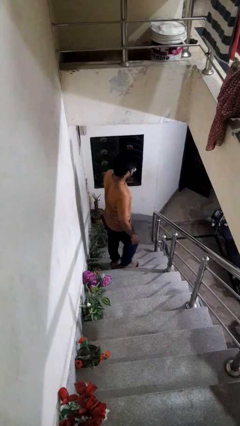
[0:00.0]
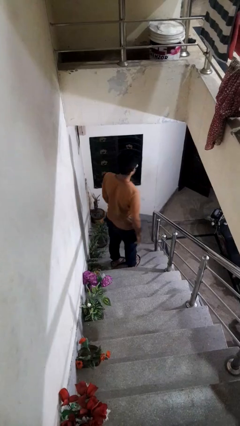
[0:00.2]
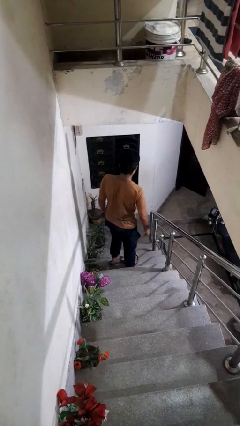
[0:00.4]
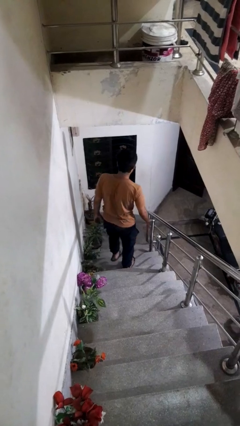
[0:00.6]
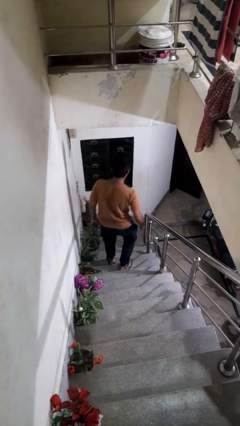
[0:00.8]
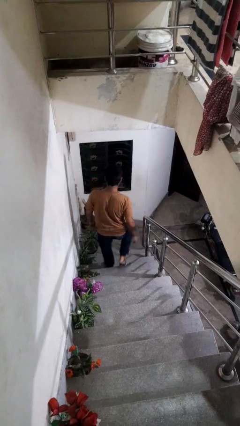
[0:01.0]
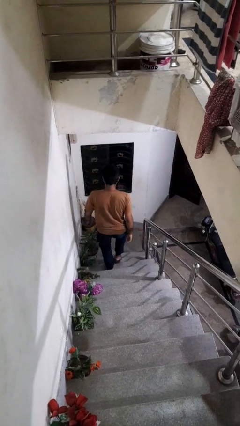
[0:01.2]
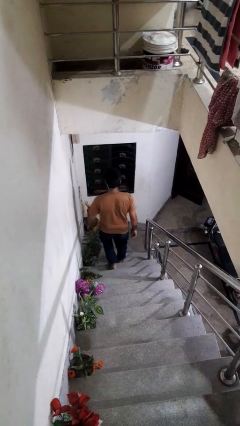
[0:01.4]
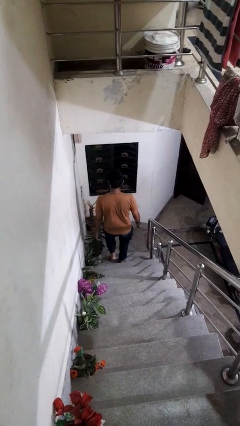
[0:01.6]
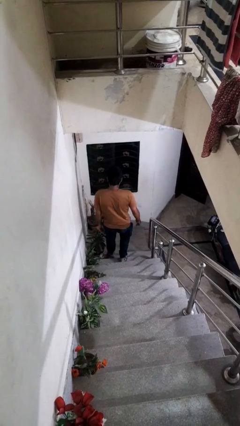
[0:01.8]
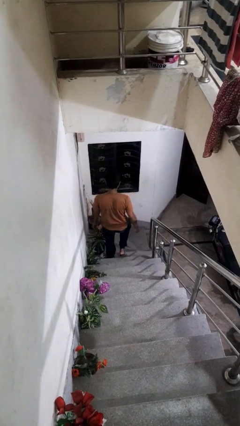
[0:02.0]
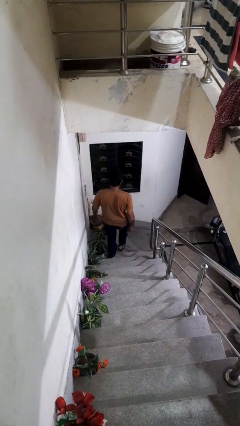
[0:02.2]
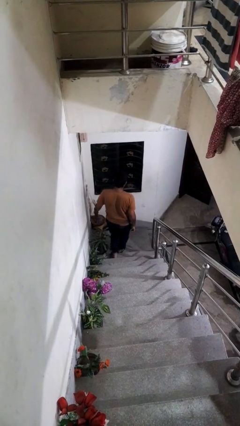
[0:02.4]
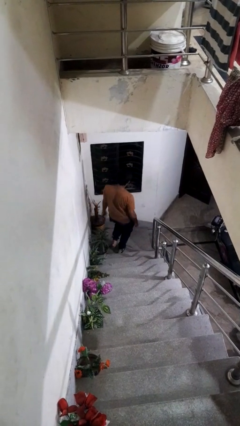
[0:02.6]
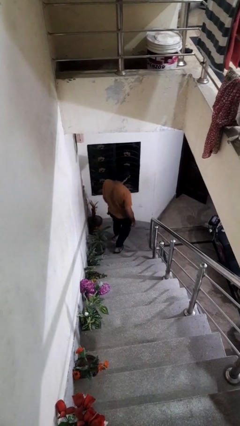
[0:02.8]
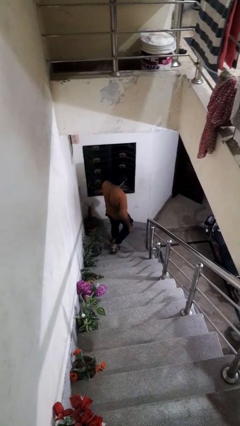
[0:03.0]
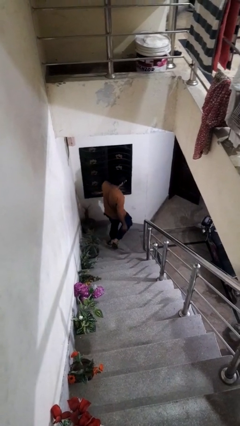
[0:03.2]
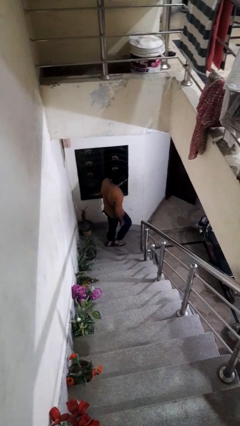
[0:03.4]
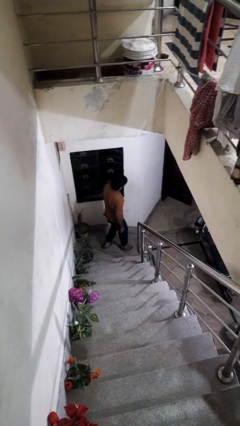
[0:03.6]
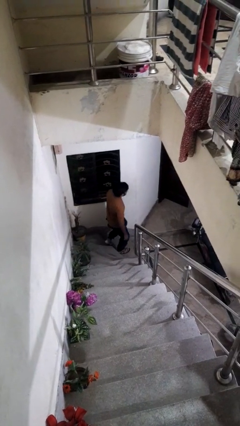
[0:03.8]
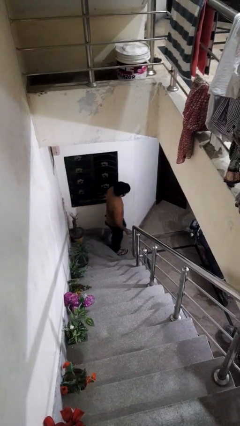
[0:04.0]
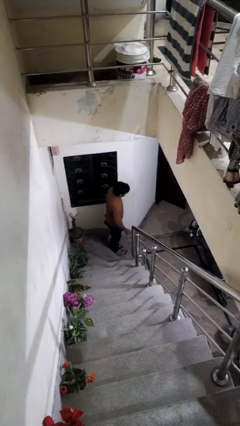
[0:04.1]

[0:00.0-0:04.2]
person climbs down stairs

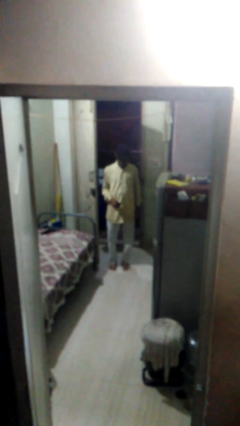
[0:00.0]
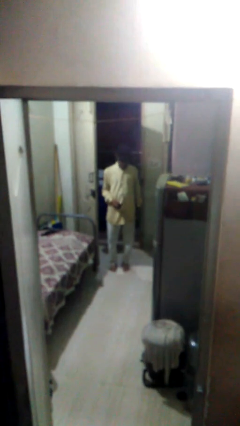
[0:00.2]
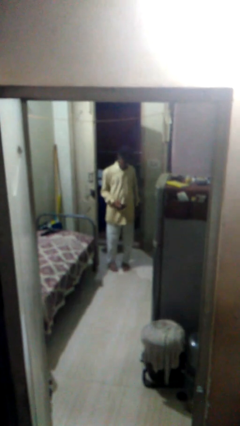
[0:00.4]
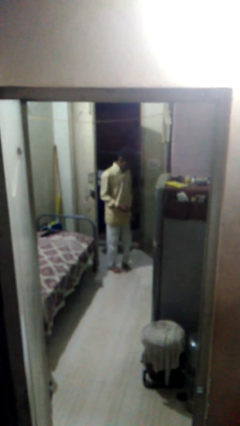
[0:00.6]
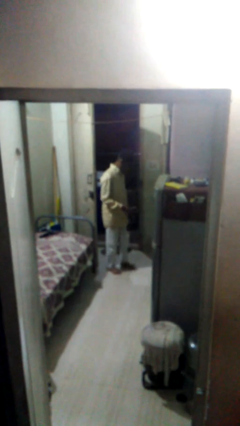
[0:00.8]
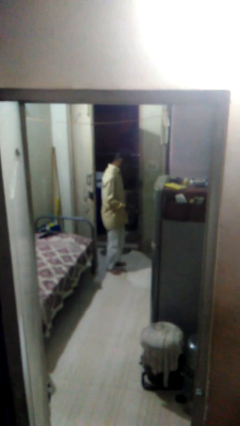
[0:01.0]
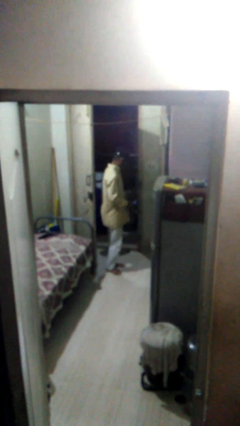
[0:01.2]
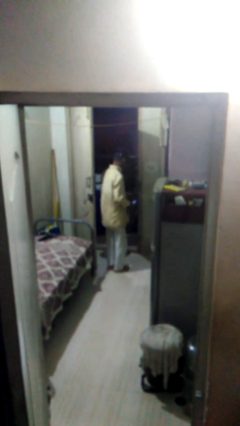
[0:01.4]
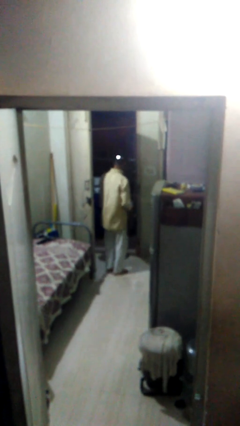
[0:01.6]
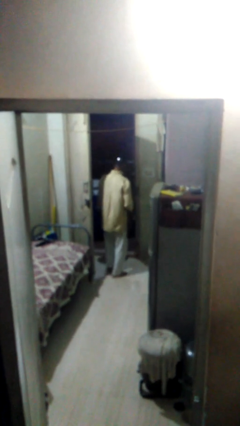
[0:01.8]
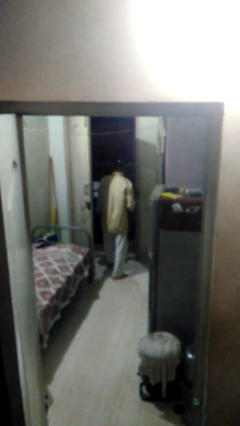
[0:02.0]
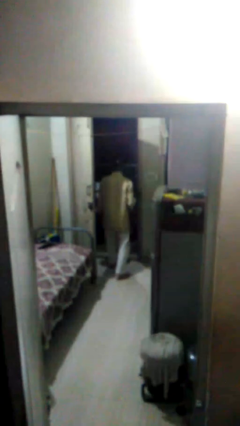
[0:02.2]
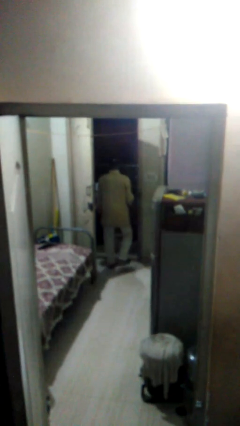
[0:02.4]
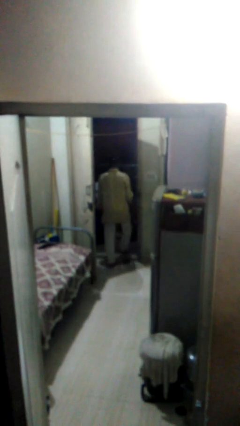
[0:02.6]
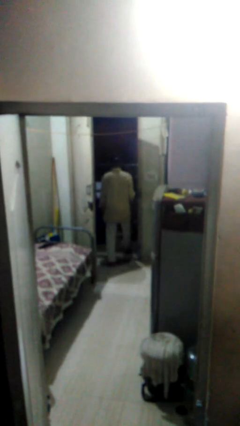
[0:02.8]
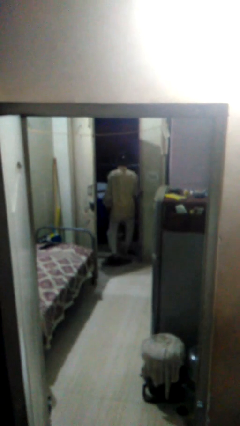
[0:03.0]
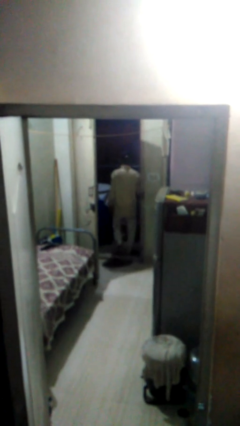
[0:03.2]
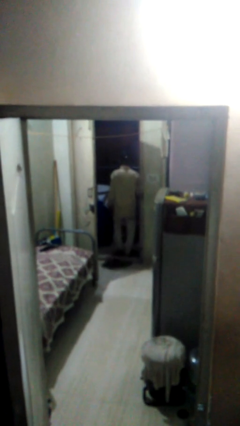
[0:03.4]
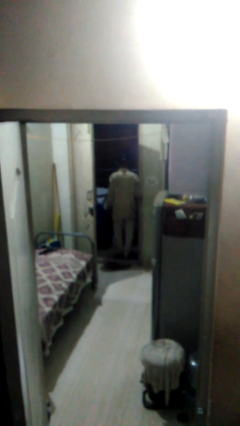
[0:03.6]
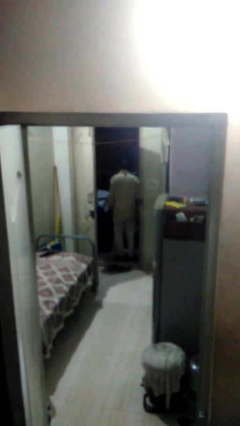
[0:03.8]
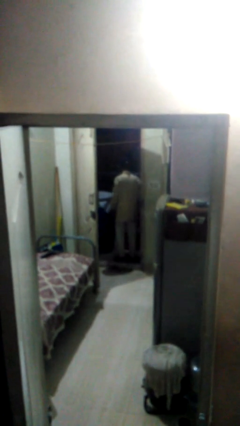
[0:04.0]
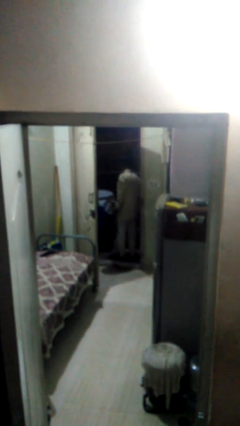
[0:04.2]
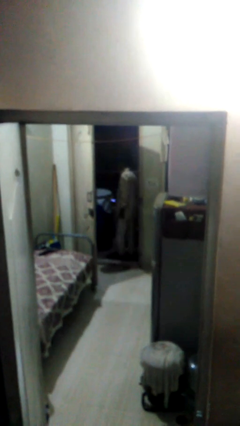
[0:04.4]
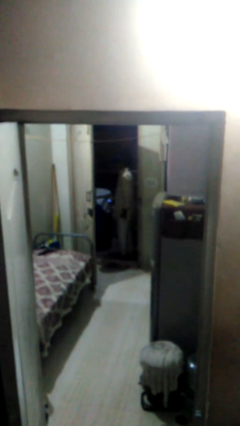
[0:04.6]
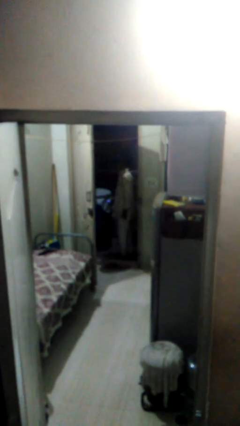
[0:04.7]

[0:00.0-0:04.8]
person exits scene through structure

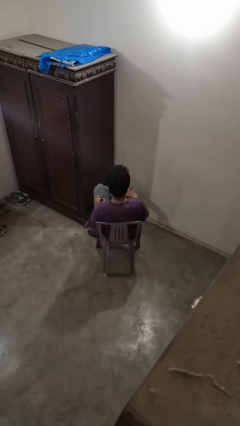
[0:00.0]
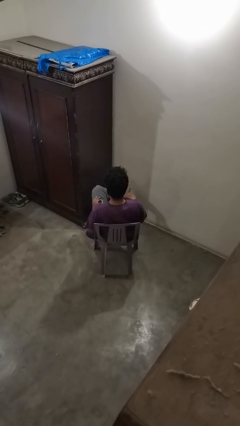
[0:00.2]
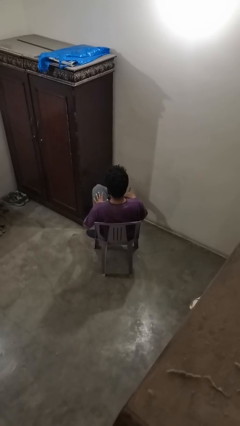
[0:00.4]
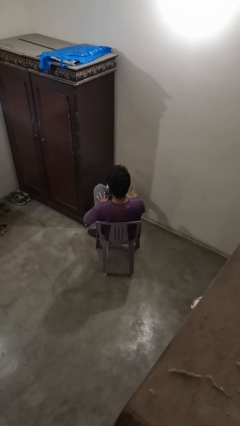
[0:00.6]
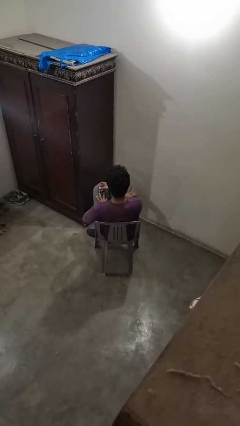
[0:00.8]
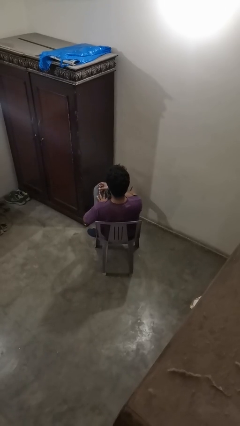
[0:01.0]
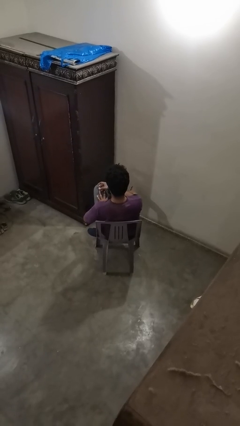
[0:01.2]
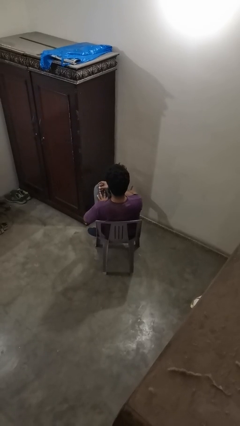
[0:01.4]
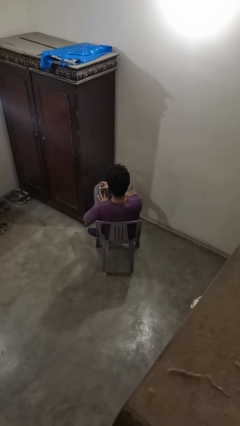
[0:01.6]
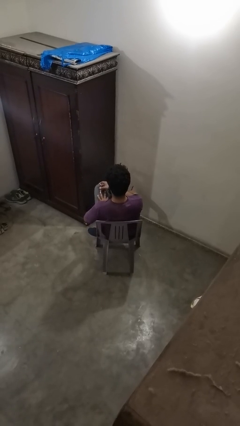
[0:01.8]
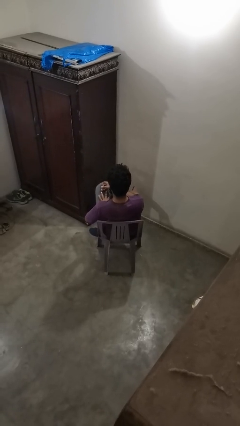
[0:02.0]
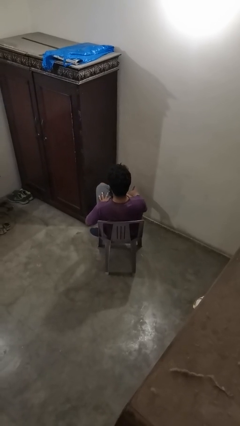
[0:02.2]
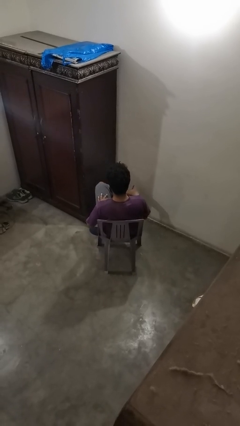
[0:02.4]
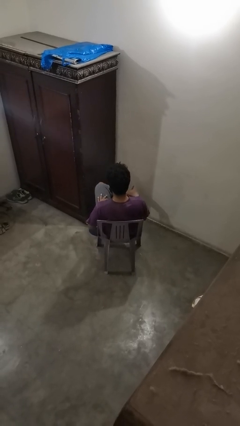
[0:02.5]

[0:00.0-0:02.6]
person clips fingernails

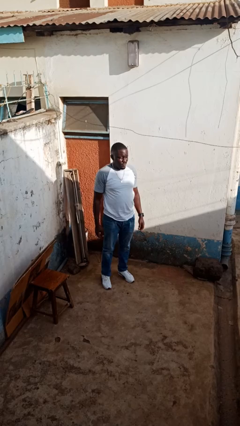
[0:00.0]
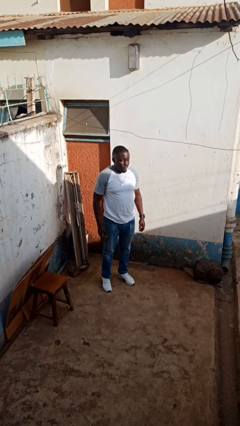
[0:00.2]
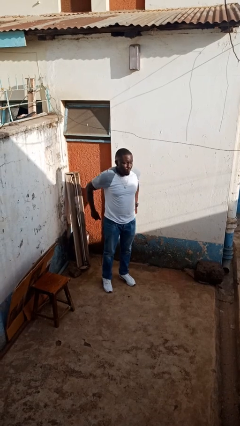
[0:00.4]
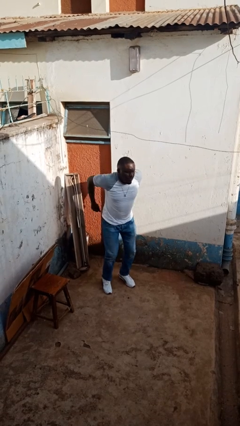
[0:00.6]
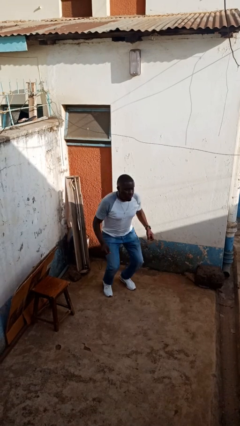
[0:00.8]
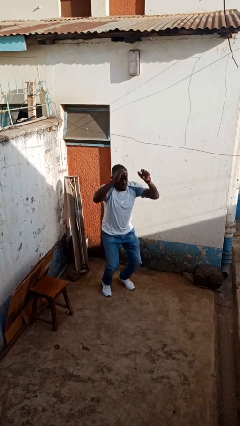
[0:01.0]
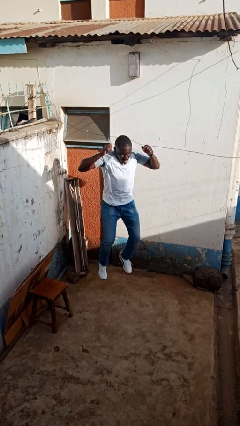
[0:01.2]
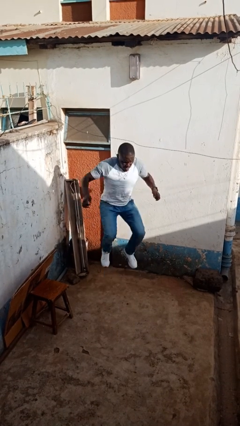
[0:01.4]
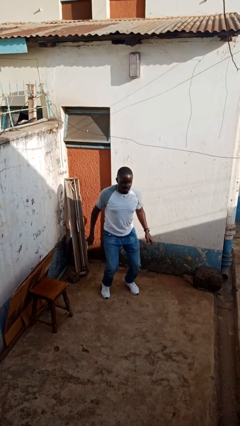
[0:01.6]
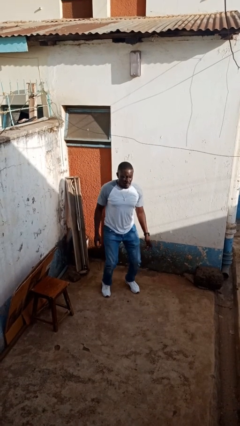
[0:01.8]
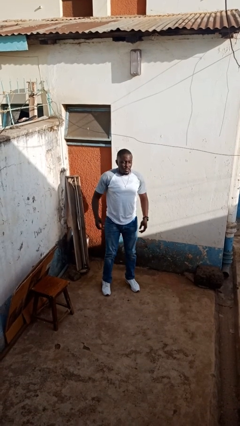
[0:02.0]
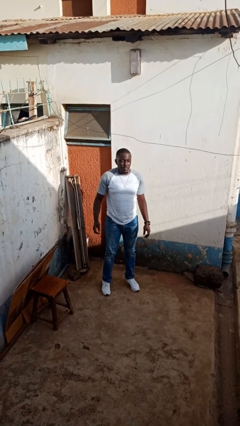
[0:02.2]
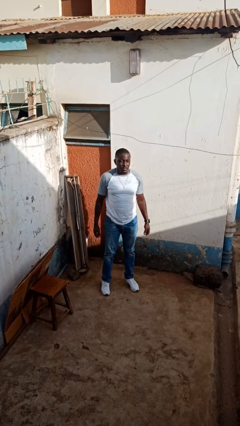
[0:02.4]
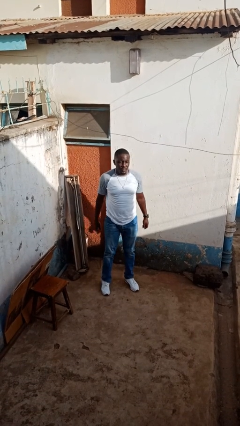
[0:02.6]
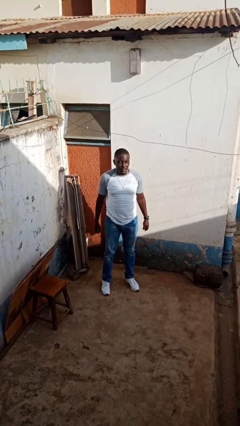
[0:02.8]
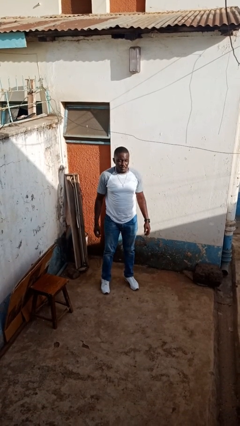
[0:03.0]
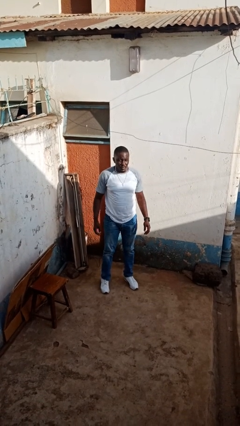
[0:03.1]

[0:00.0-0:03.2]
person jumps

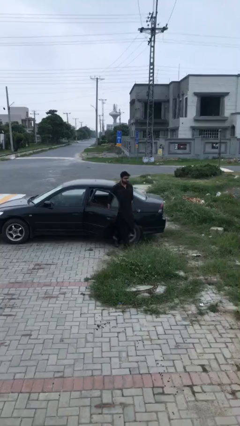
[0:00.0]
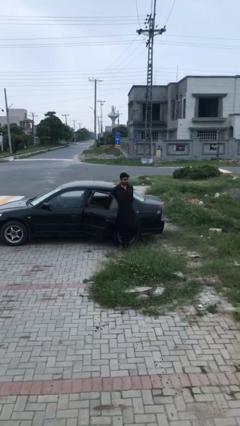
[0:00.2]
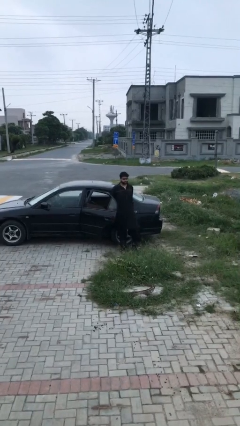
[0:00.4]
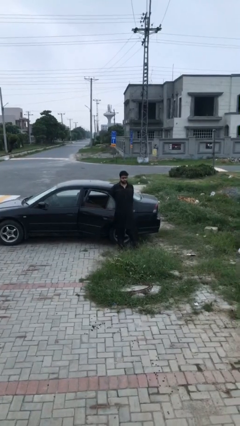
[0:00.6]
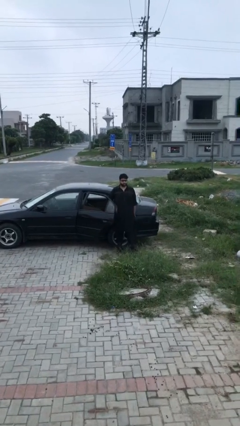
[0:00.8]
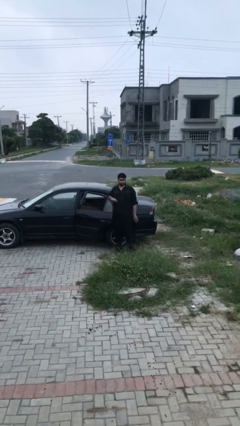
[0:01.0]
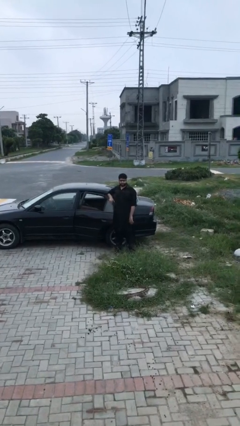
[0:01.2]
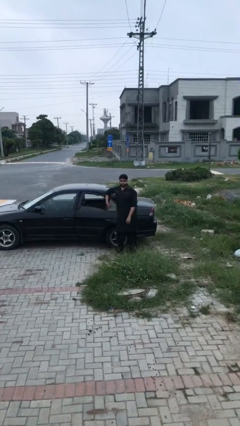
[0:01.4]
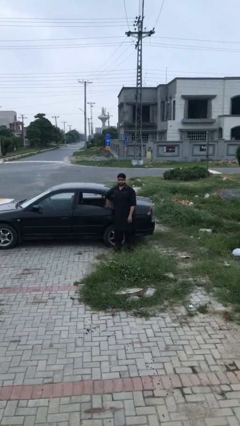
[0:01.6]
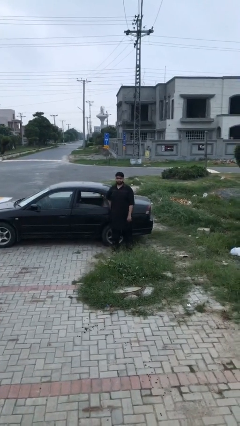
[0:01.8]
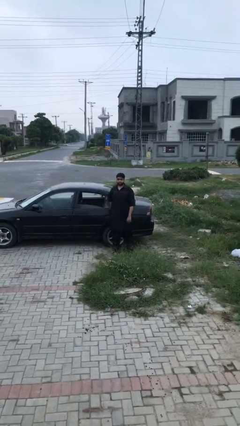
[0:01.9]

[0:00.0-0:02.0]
person closes car door

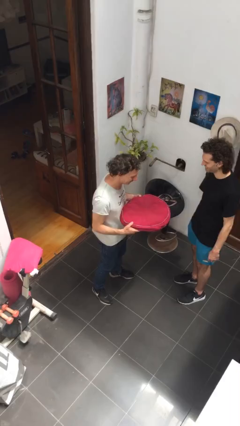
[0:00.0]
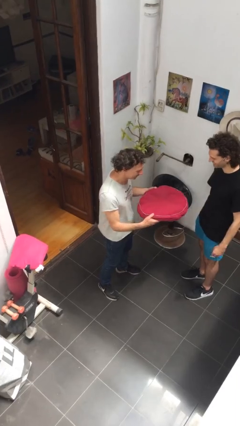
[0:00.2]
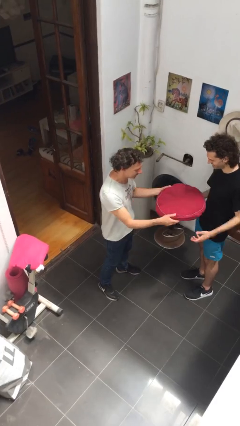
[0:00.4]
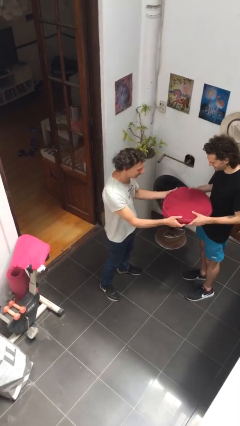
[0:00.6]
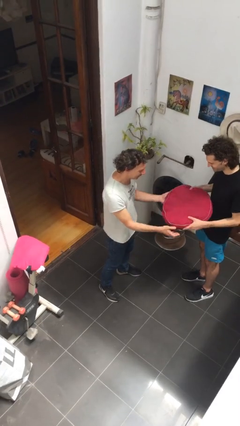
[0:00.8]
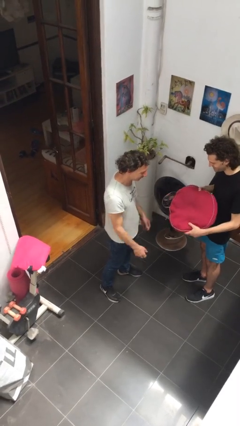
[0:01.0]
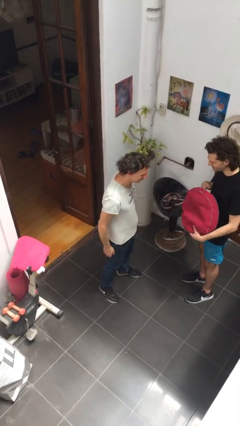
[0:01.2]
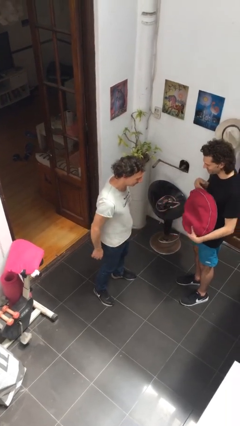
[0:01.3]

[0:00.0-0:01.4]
person transfers object to person
